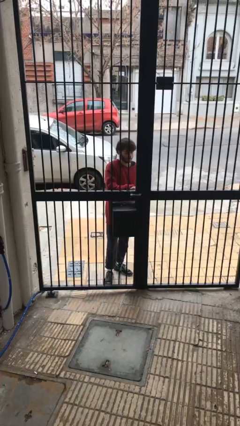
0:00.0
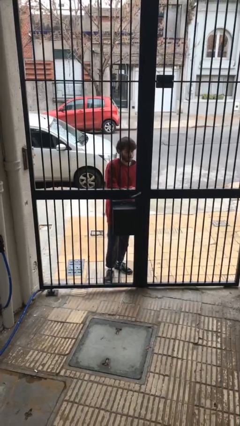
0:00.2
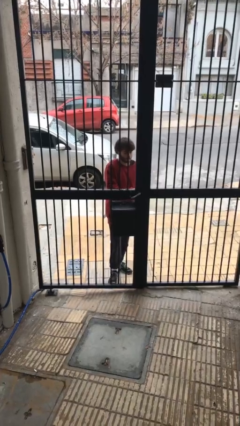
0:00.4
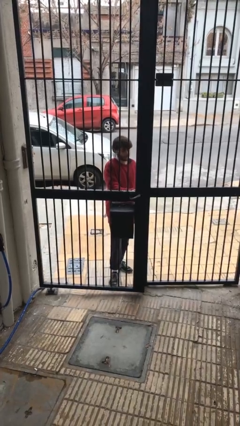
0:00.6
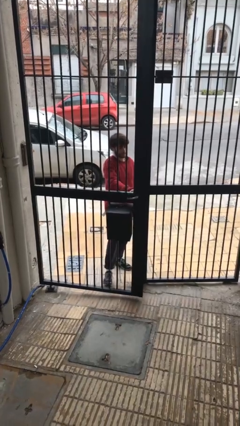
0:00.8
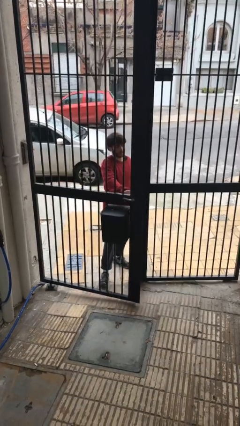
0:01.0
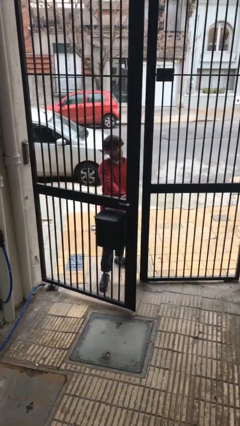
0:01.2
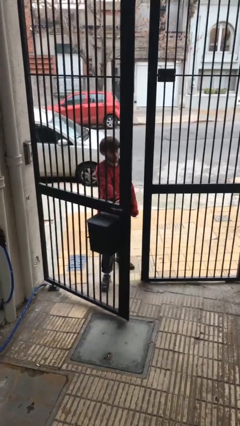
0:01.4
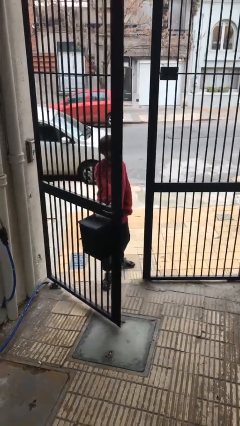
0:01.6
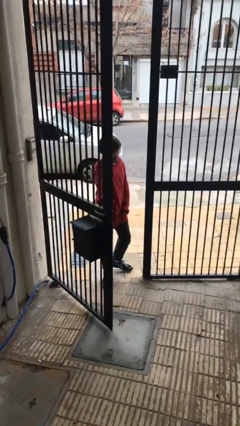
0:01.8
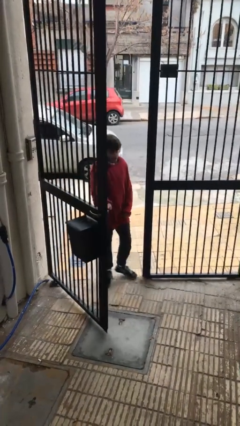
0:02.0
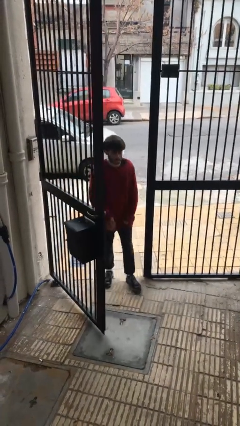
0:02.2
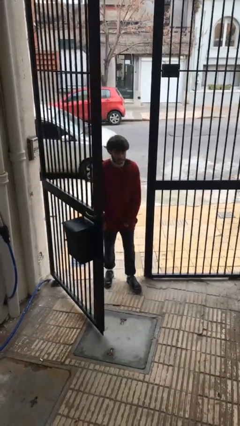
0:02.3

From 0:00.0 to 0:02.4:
person opens gate

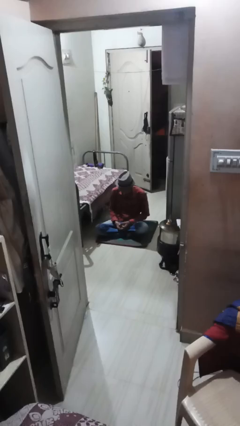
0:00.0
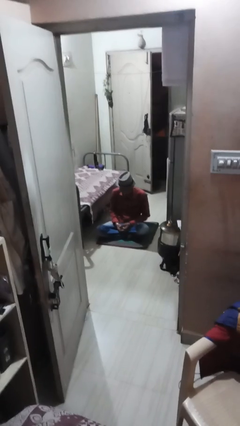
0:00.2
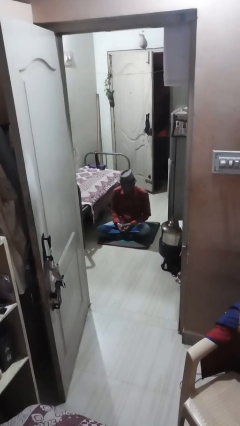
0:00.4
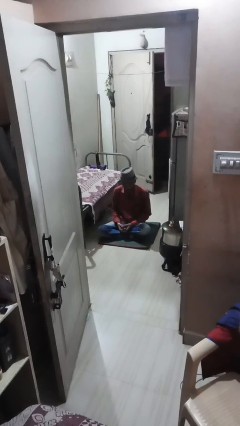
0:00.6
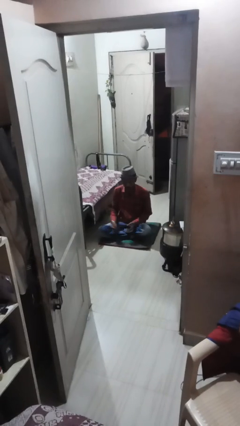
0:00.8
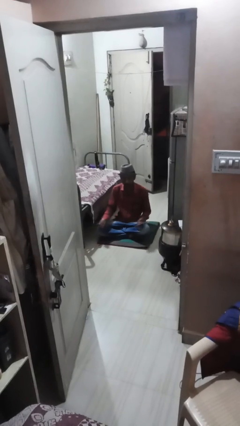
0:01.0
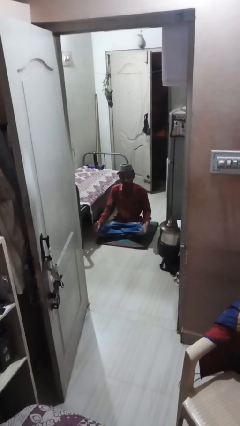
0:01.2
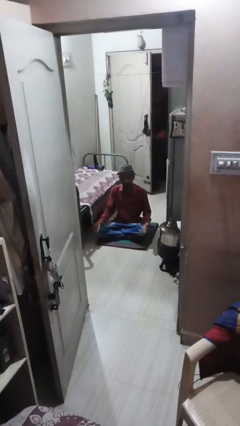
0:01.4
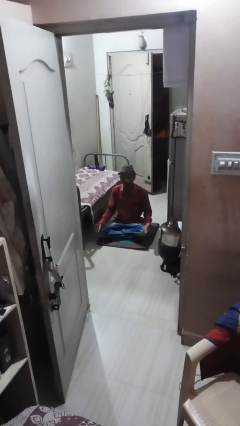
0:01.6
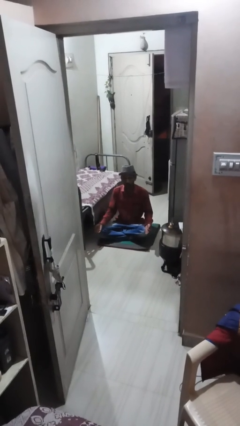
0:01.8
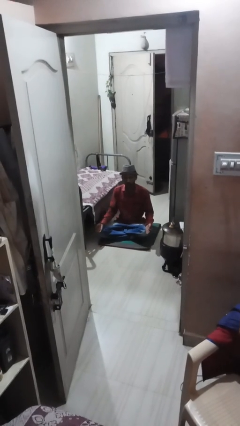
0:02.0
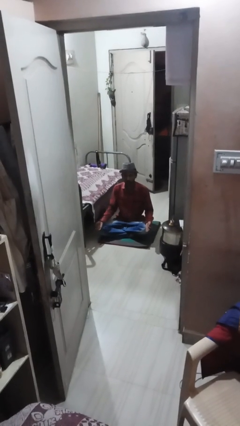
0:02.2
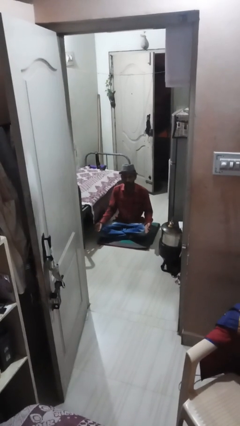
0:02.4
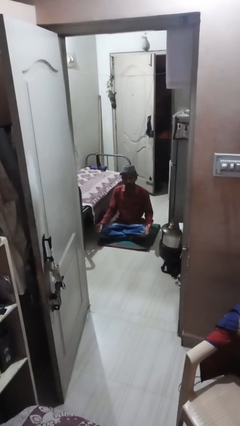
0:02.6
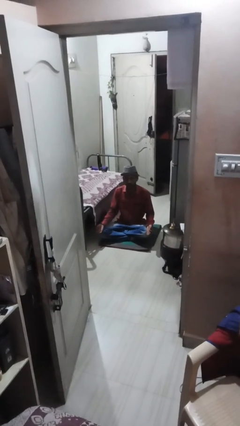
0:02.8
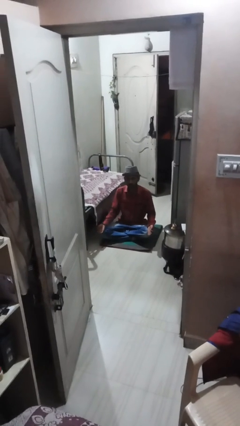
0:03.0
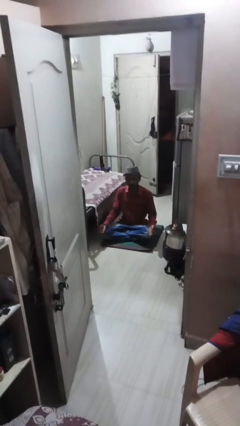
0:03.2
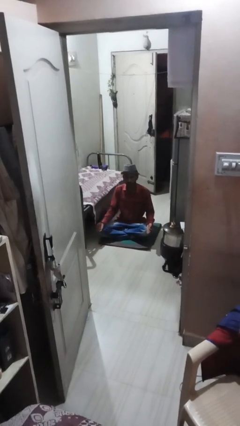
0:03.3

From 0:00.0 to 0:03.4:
person prays

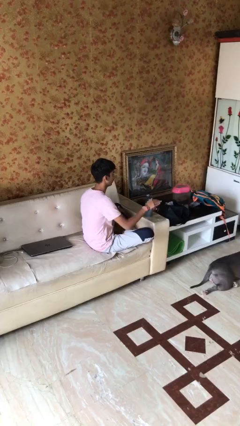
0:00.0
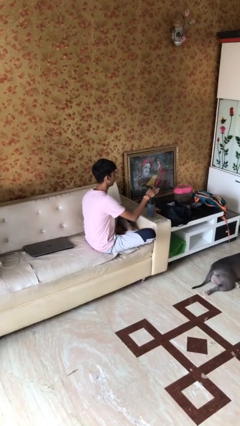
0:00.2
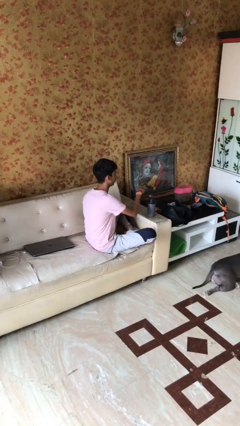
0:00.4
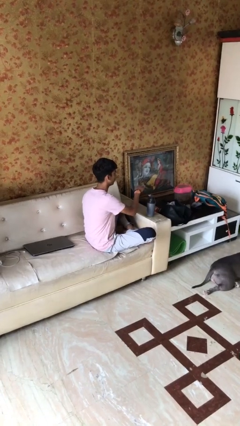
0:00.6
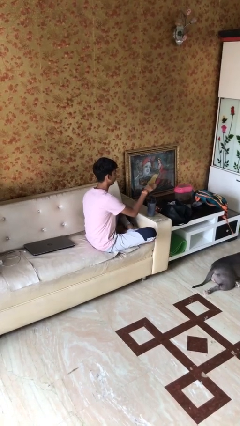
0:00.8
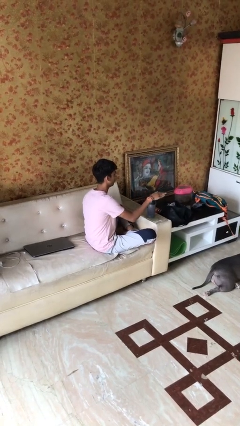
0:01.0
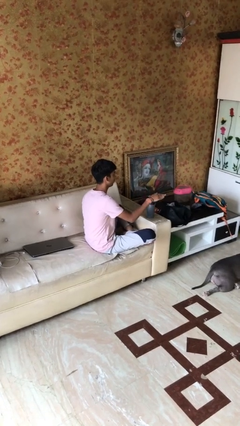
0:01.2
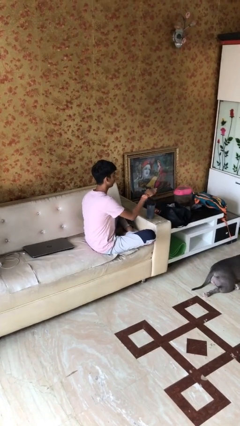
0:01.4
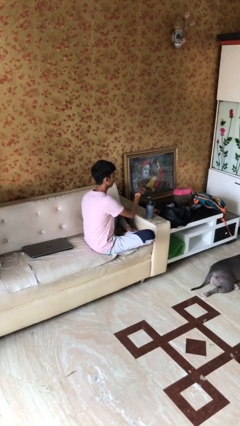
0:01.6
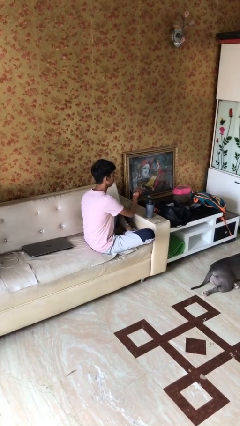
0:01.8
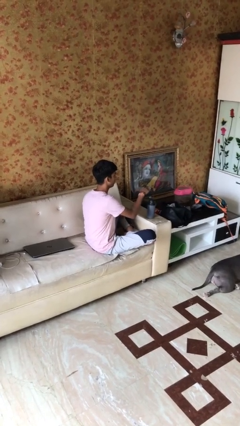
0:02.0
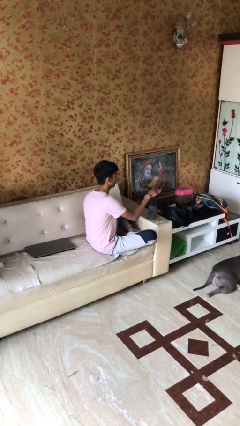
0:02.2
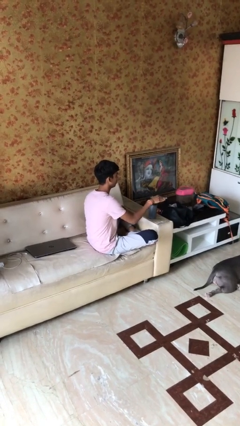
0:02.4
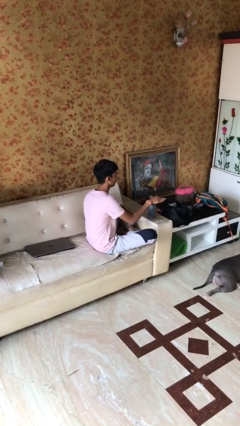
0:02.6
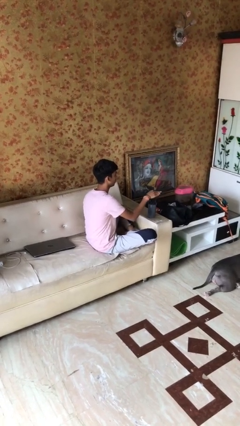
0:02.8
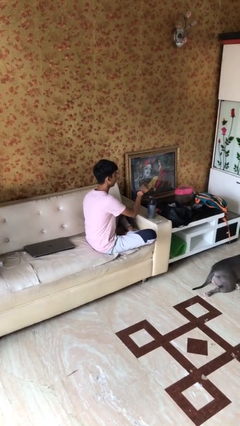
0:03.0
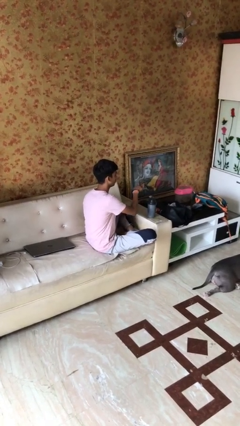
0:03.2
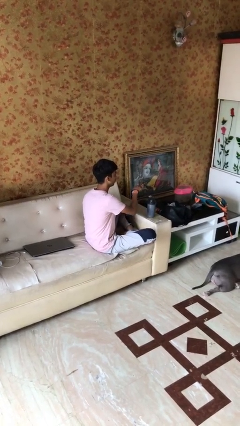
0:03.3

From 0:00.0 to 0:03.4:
person waves hand over object

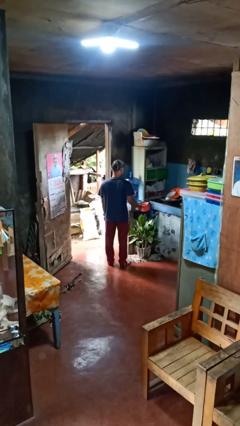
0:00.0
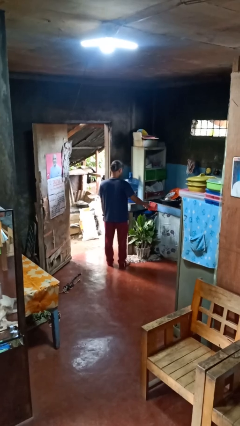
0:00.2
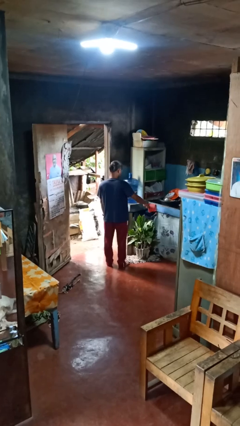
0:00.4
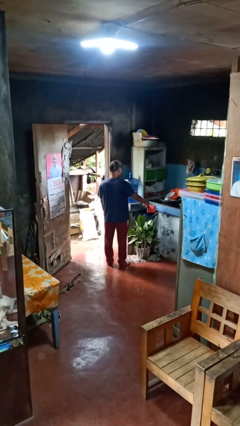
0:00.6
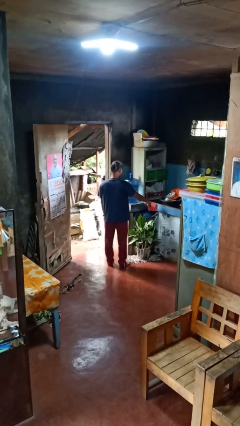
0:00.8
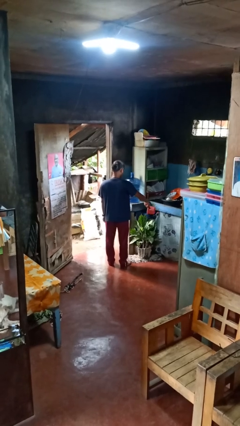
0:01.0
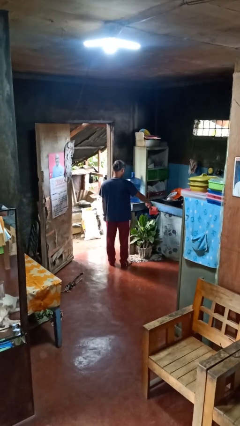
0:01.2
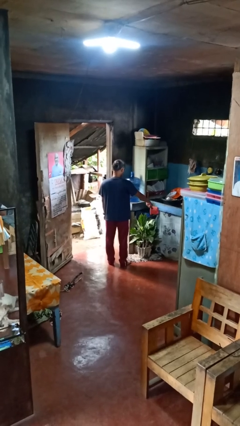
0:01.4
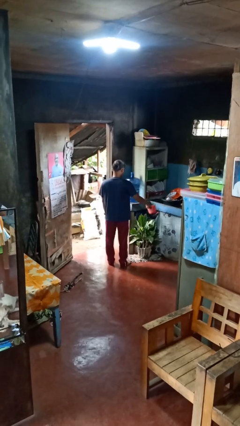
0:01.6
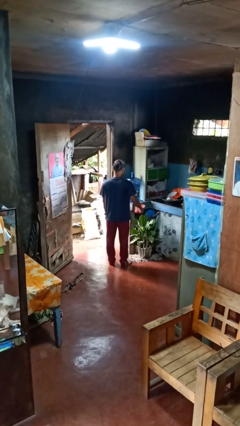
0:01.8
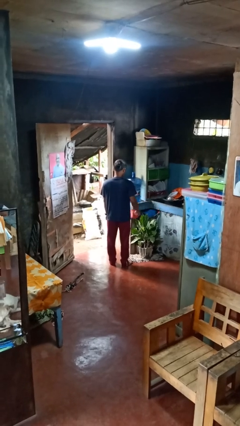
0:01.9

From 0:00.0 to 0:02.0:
person waters houseplant

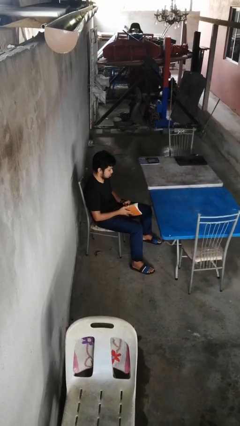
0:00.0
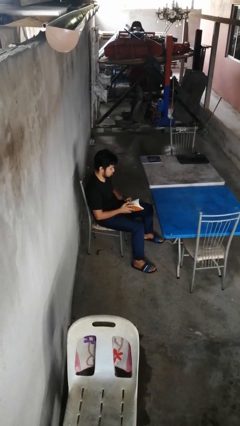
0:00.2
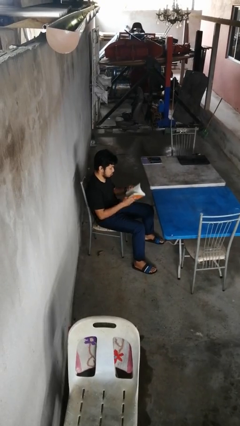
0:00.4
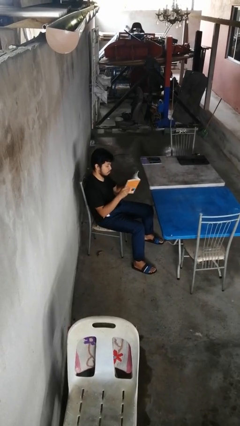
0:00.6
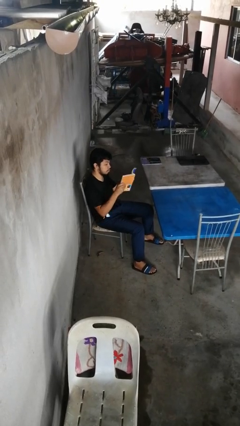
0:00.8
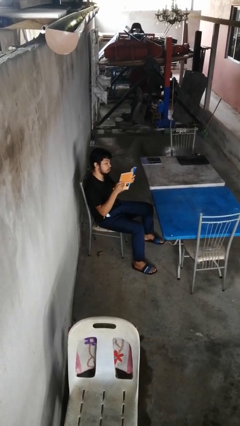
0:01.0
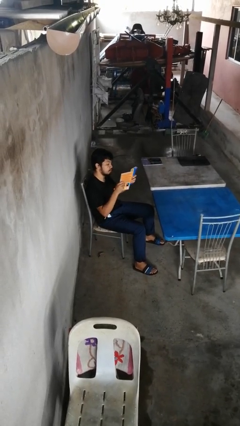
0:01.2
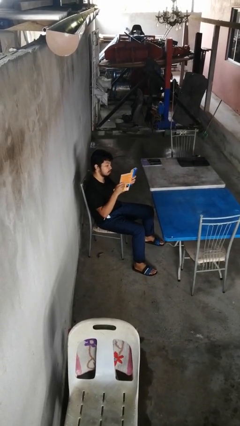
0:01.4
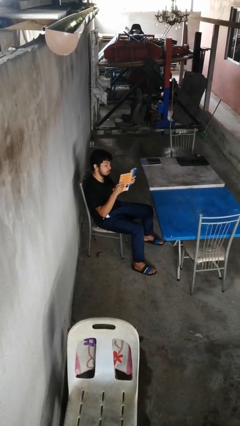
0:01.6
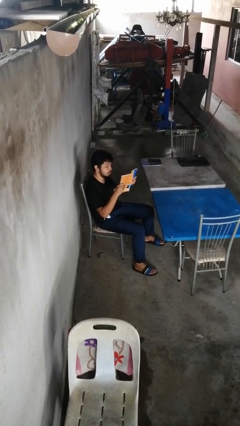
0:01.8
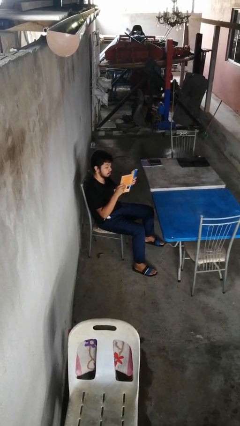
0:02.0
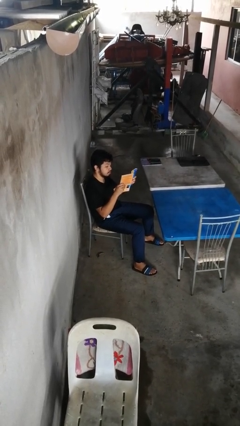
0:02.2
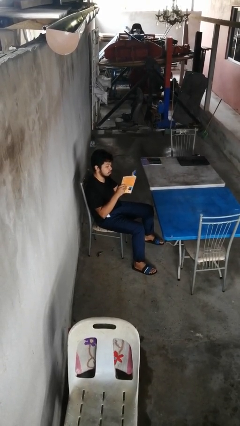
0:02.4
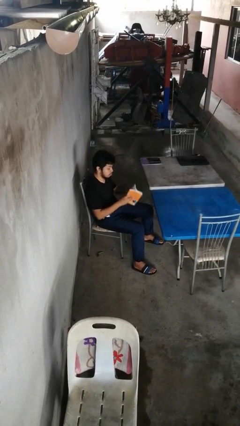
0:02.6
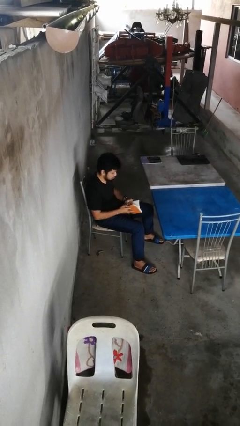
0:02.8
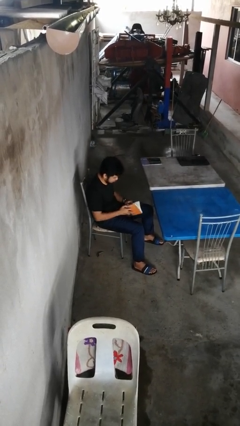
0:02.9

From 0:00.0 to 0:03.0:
person reads book

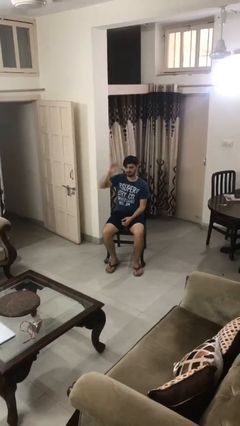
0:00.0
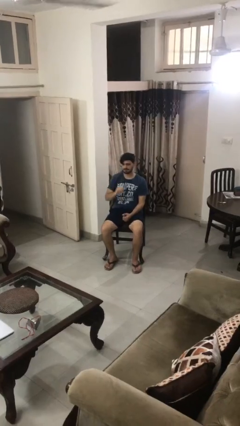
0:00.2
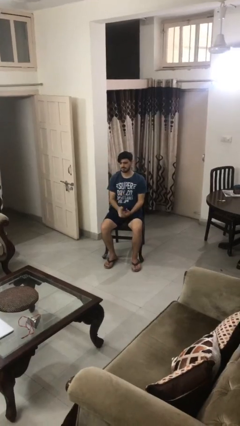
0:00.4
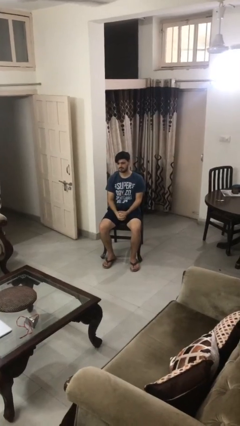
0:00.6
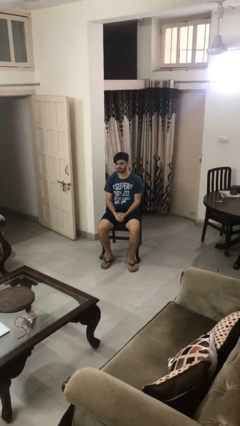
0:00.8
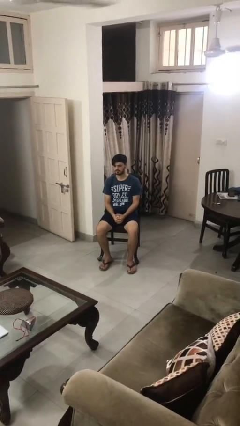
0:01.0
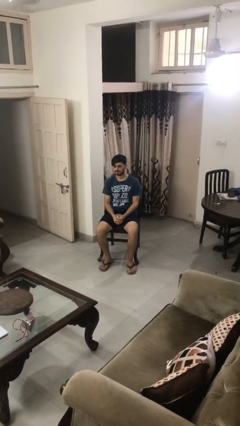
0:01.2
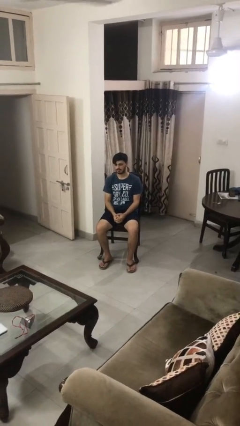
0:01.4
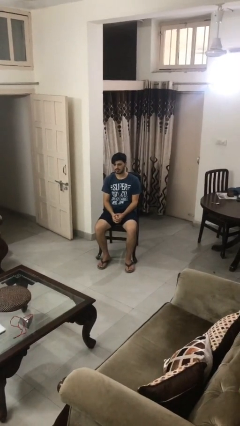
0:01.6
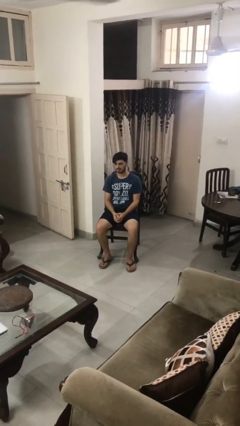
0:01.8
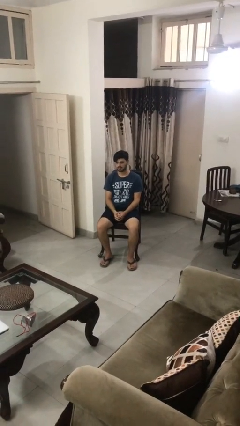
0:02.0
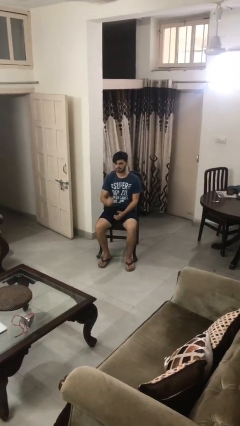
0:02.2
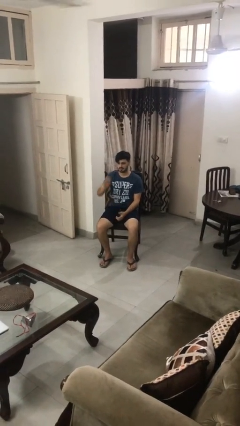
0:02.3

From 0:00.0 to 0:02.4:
person gestures lower hand

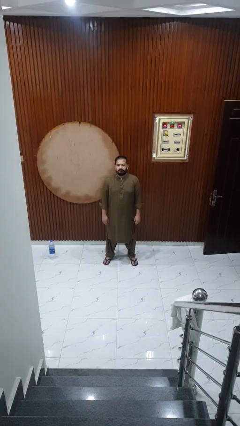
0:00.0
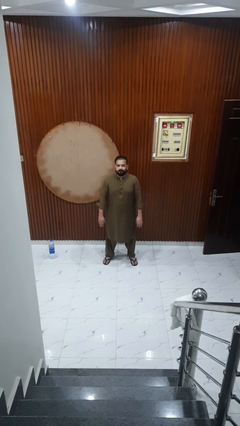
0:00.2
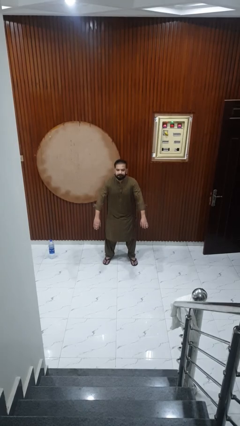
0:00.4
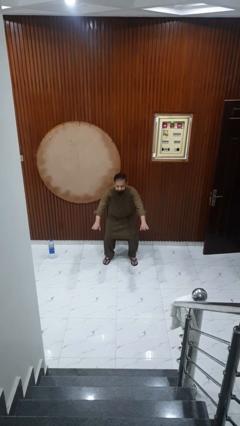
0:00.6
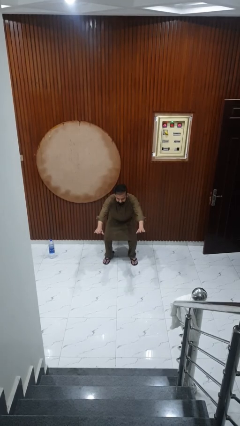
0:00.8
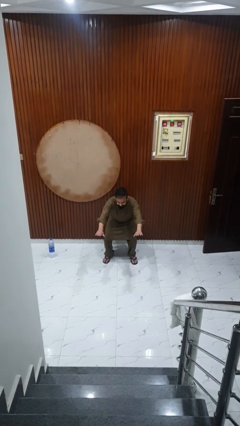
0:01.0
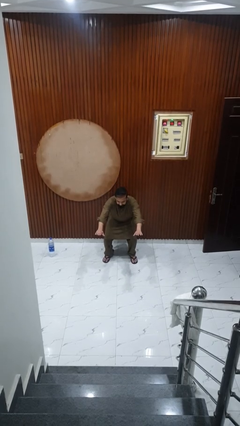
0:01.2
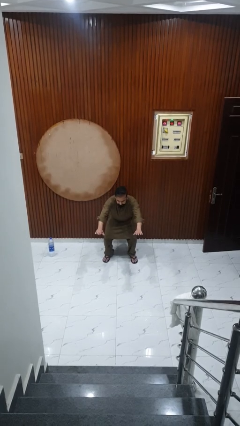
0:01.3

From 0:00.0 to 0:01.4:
person squats
